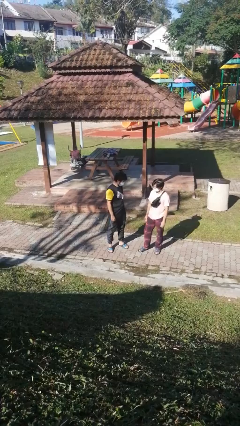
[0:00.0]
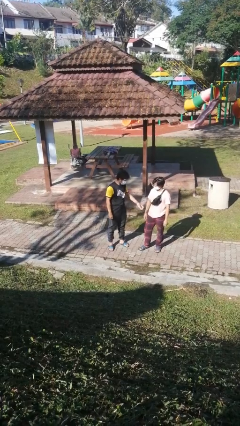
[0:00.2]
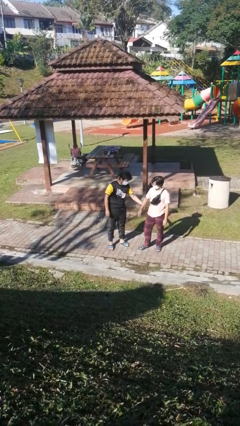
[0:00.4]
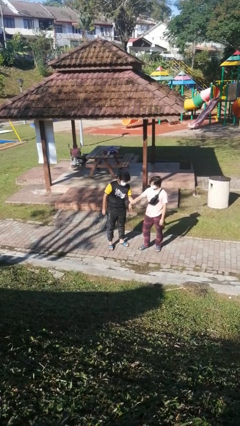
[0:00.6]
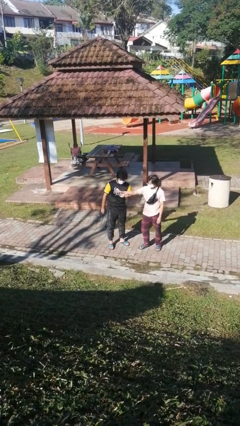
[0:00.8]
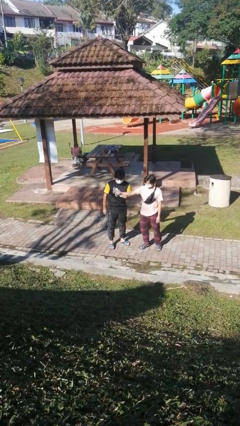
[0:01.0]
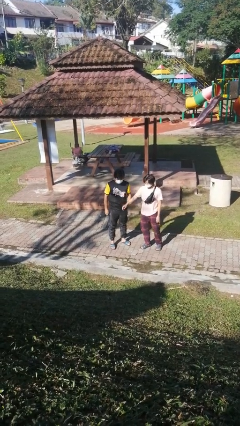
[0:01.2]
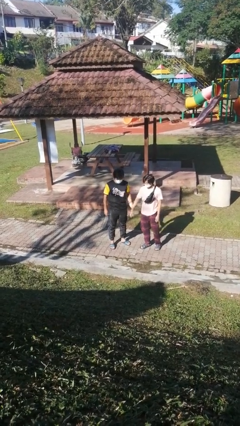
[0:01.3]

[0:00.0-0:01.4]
person grabs person by forearm

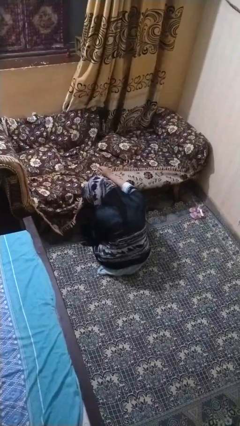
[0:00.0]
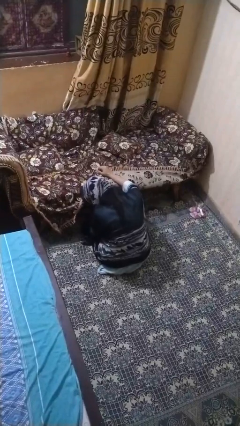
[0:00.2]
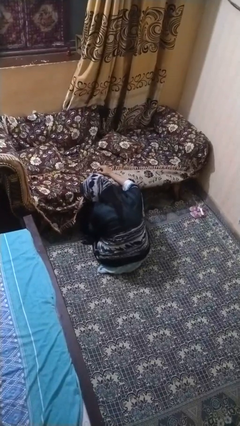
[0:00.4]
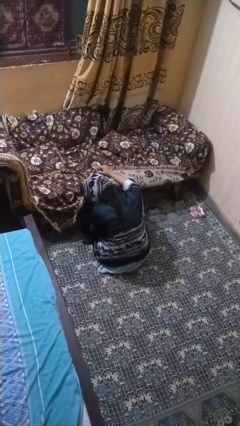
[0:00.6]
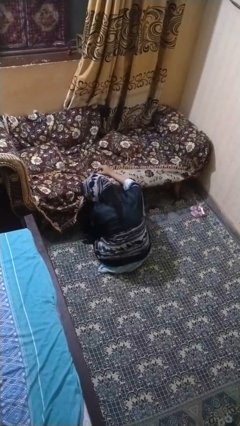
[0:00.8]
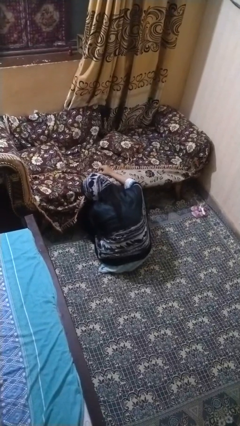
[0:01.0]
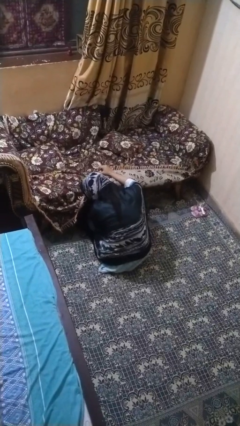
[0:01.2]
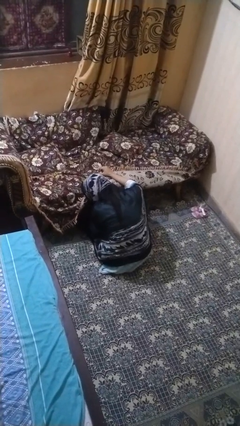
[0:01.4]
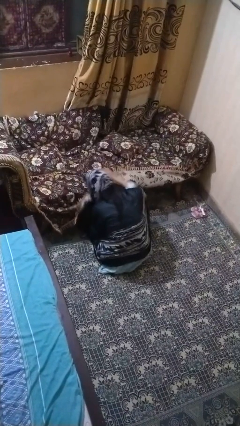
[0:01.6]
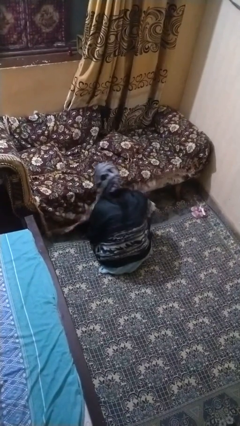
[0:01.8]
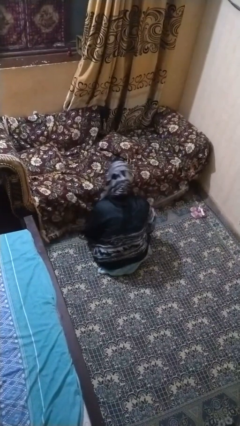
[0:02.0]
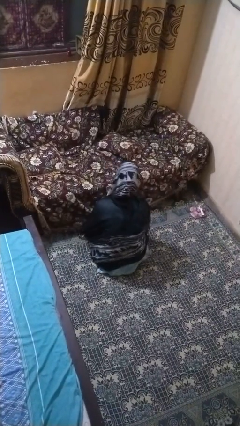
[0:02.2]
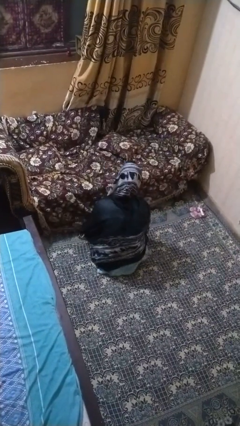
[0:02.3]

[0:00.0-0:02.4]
person searches under couch

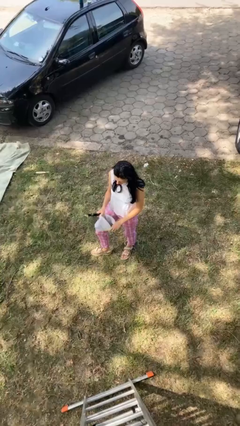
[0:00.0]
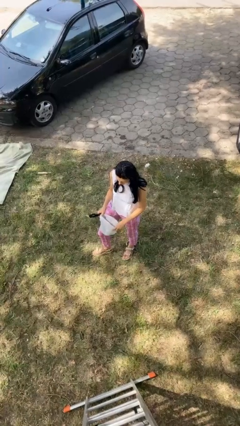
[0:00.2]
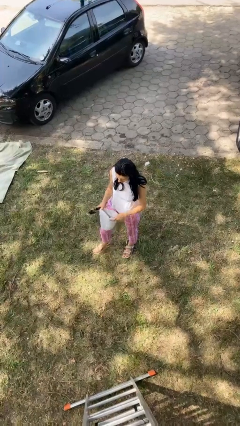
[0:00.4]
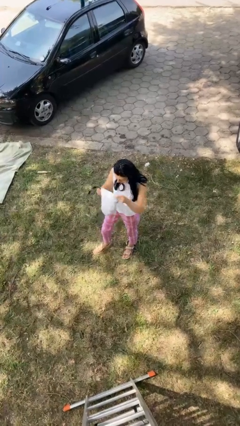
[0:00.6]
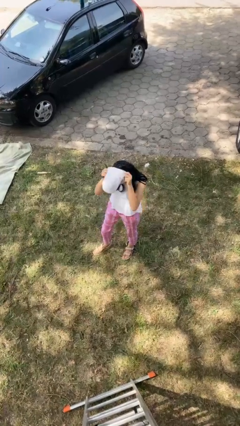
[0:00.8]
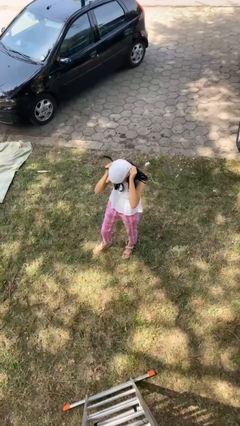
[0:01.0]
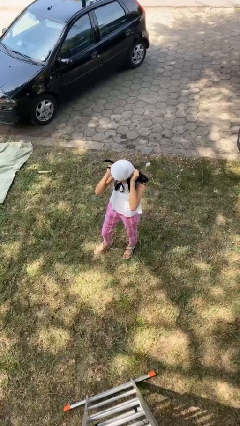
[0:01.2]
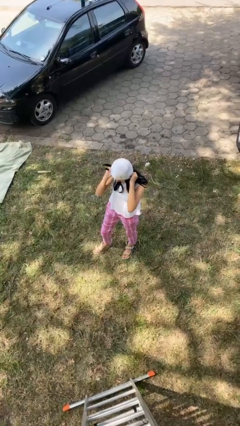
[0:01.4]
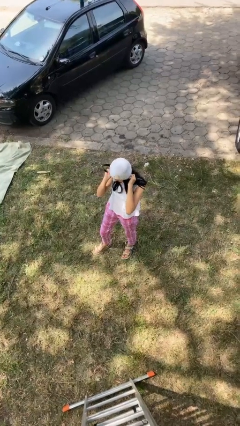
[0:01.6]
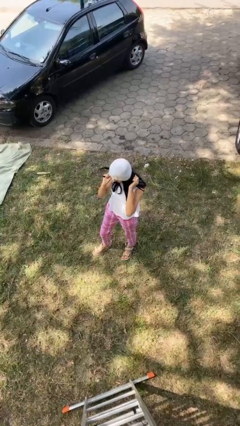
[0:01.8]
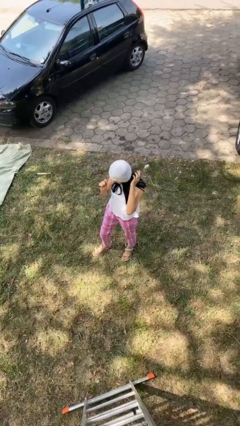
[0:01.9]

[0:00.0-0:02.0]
person puts on hat

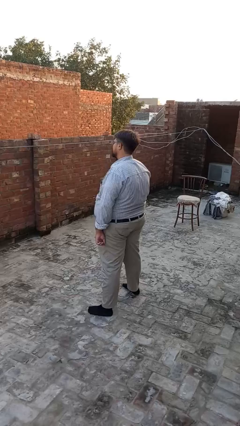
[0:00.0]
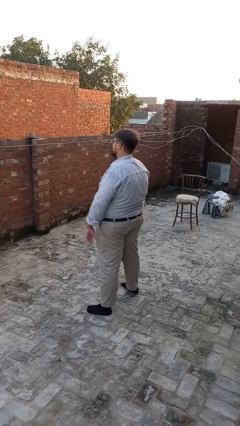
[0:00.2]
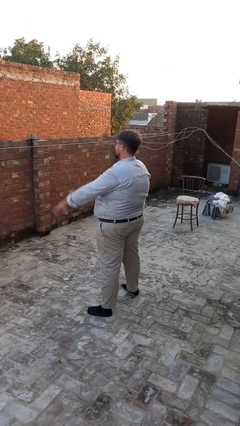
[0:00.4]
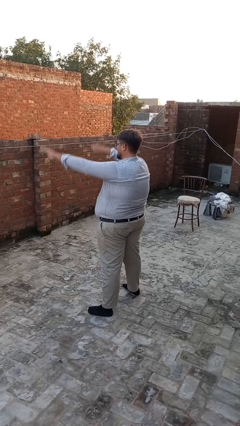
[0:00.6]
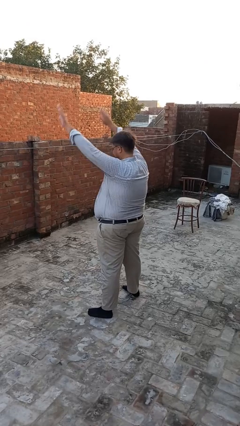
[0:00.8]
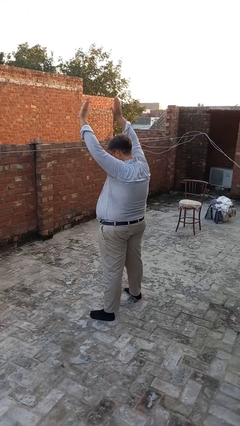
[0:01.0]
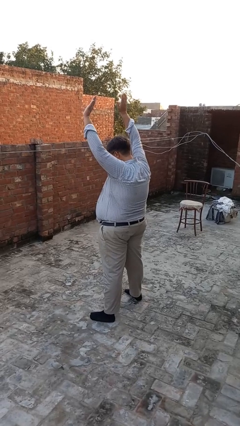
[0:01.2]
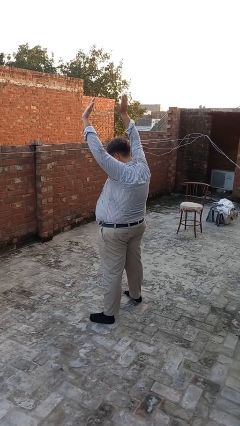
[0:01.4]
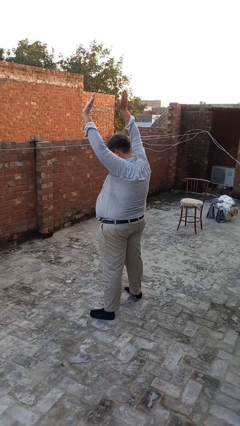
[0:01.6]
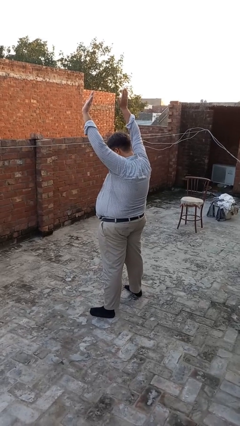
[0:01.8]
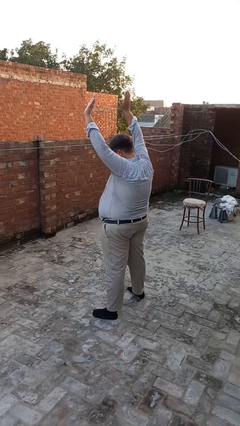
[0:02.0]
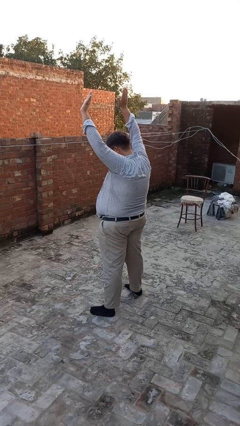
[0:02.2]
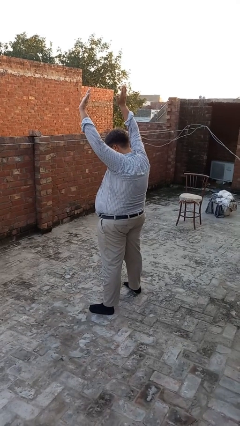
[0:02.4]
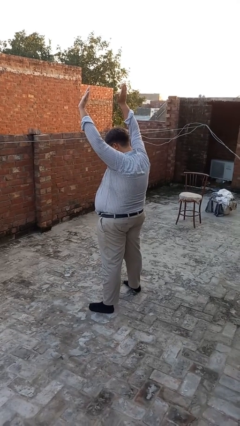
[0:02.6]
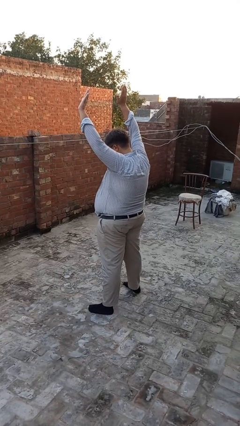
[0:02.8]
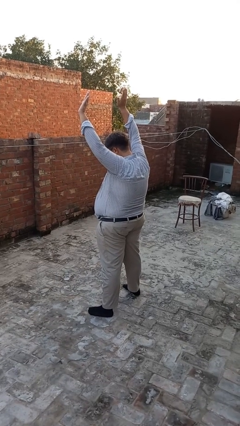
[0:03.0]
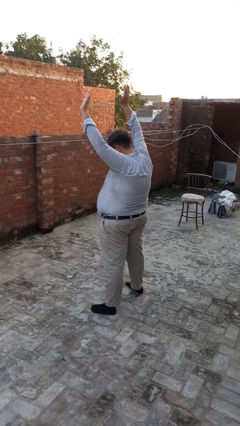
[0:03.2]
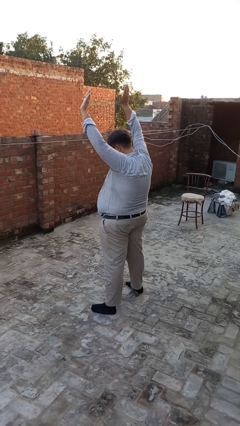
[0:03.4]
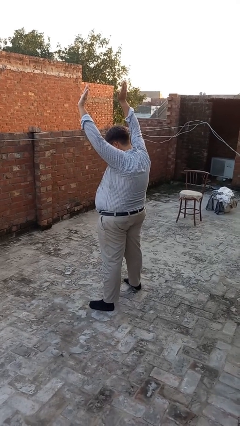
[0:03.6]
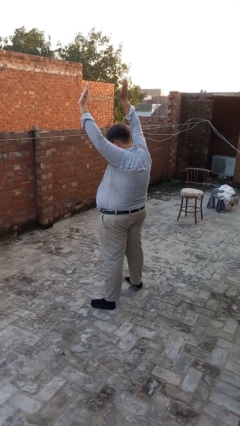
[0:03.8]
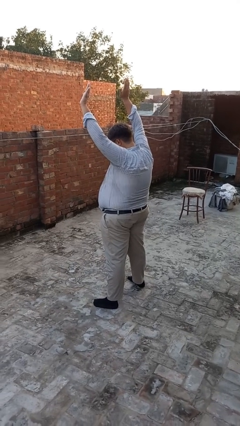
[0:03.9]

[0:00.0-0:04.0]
person gestures swipe up

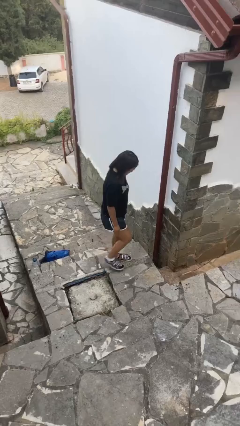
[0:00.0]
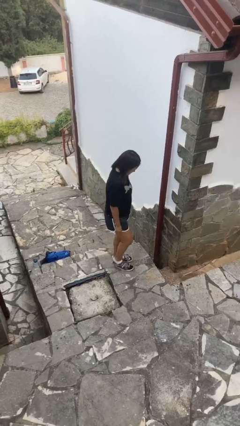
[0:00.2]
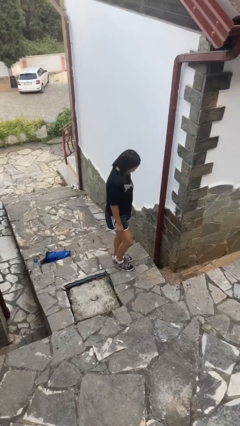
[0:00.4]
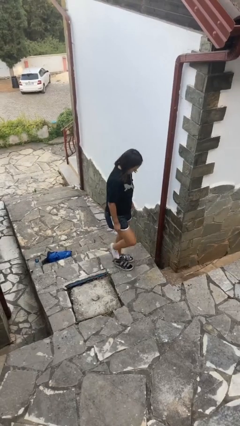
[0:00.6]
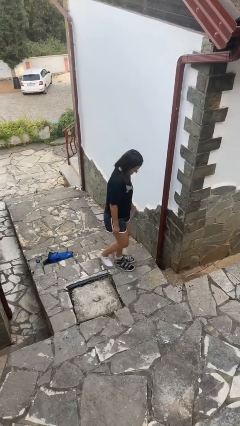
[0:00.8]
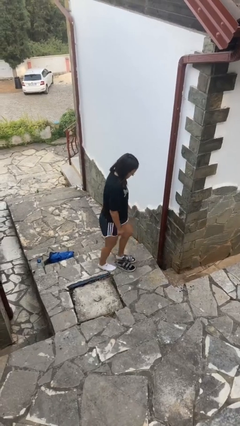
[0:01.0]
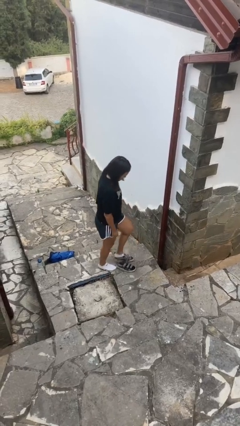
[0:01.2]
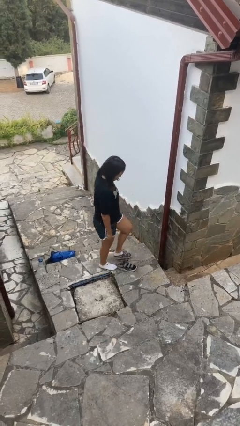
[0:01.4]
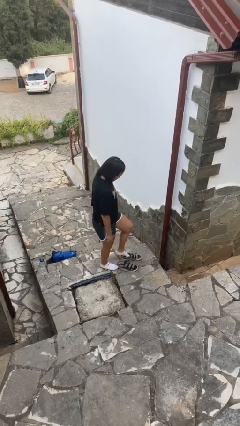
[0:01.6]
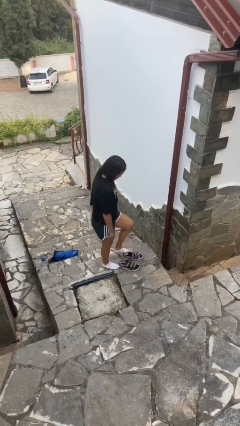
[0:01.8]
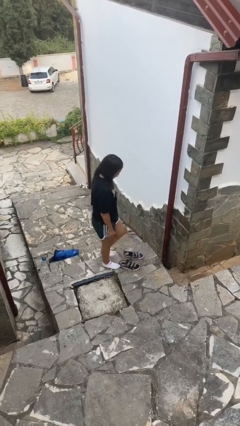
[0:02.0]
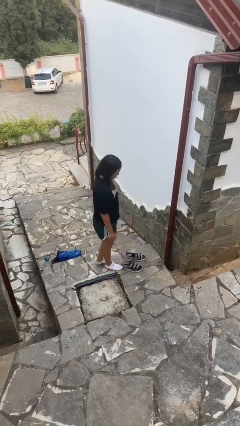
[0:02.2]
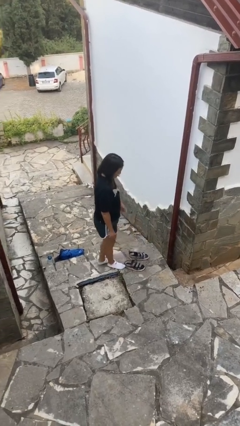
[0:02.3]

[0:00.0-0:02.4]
person takes off shoes

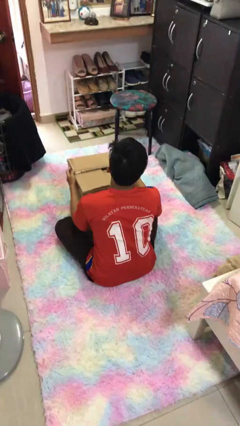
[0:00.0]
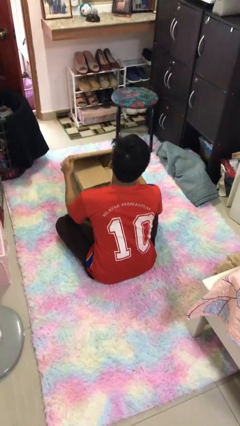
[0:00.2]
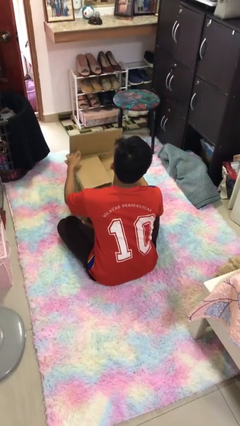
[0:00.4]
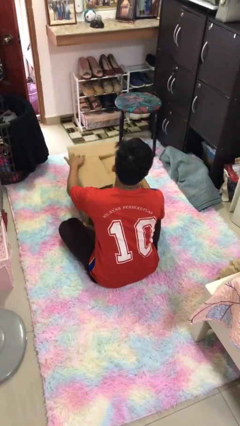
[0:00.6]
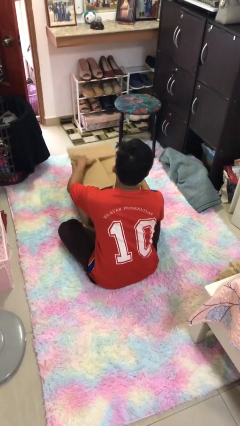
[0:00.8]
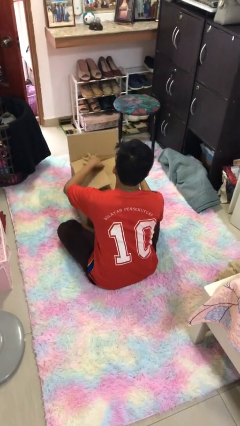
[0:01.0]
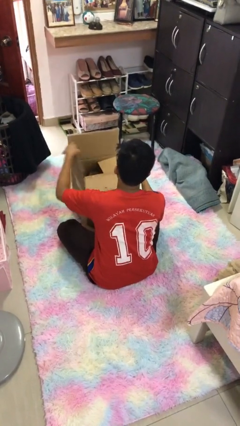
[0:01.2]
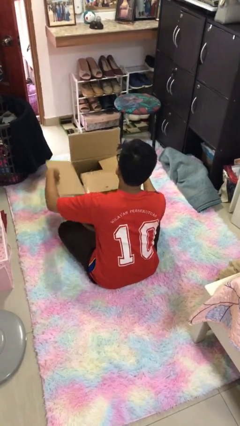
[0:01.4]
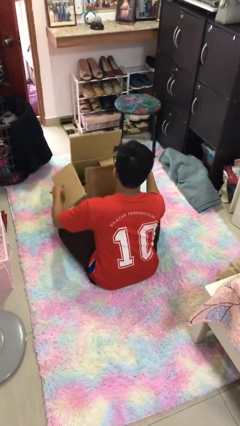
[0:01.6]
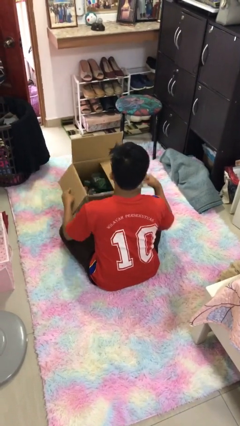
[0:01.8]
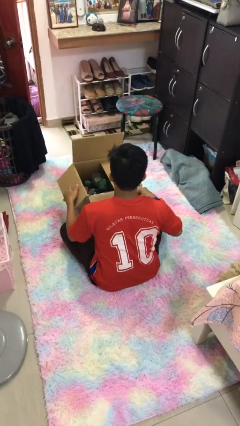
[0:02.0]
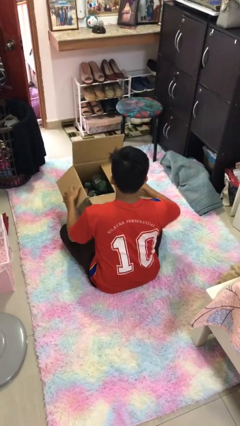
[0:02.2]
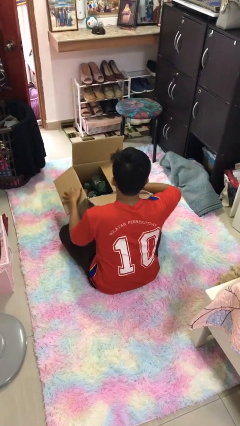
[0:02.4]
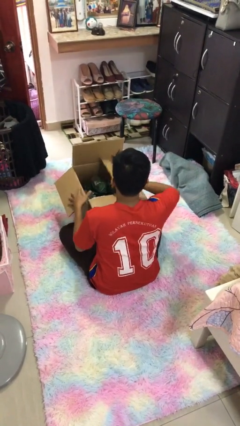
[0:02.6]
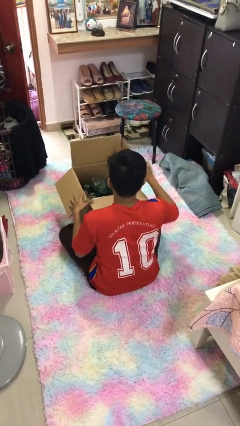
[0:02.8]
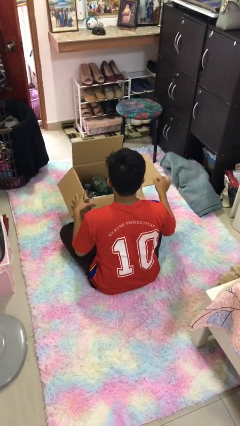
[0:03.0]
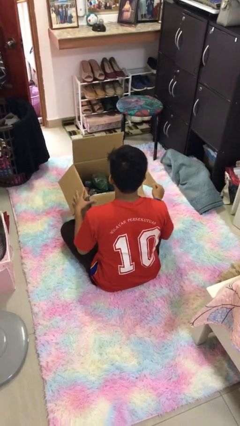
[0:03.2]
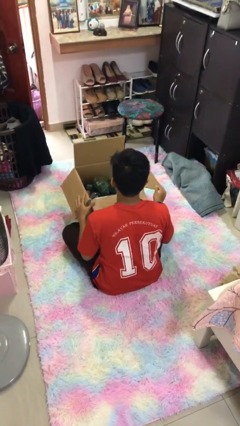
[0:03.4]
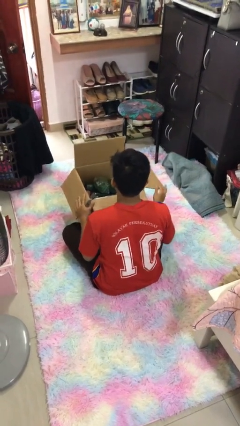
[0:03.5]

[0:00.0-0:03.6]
person opens box

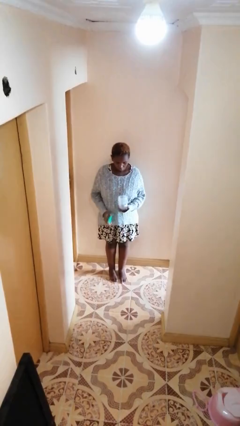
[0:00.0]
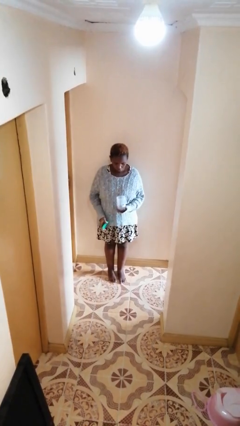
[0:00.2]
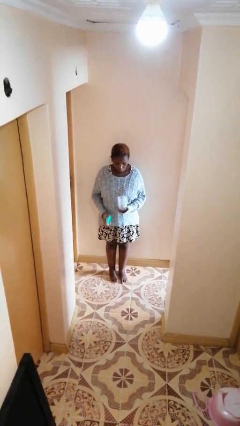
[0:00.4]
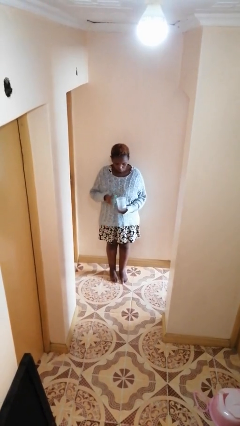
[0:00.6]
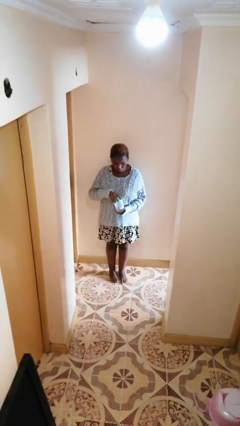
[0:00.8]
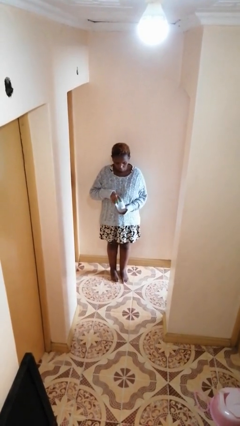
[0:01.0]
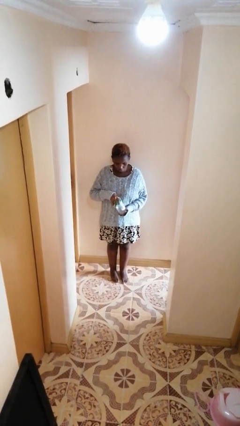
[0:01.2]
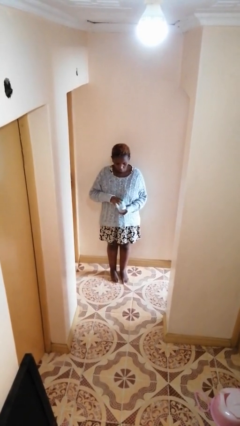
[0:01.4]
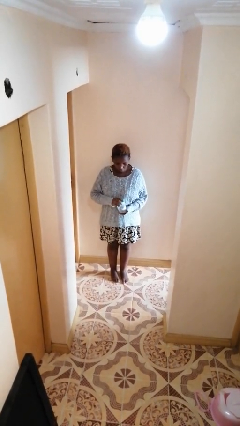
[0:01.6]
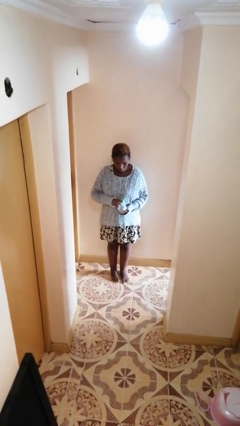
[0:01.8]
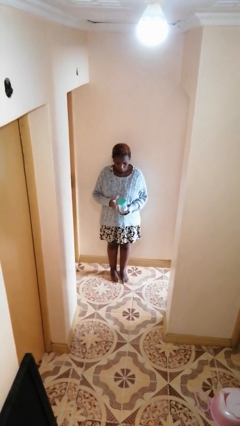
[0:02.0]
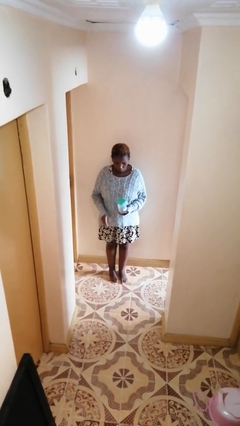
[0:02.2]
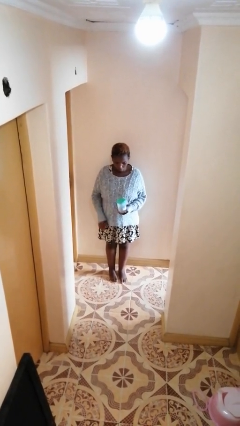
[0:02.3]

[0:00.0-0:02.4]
person closes jar
